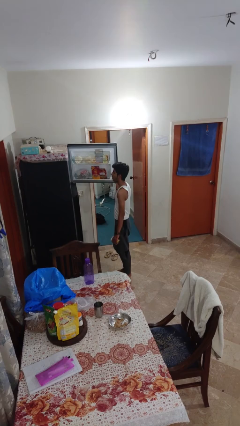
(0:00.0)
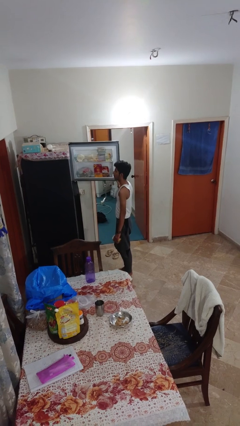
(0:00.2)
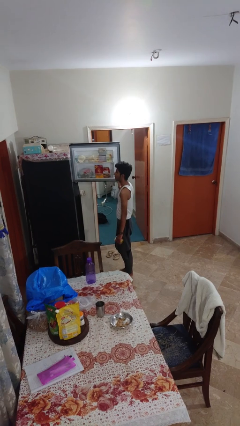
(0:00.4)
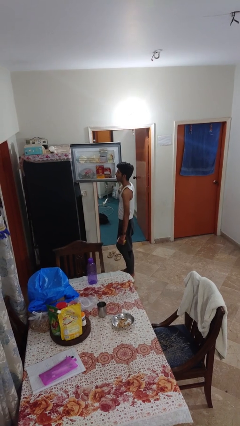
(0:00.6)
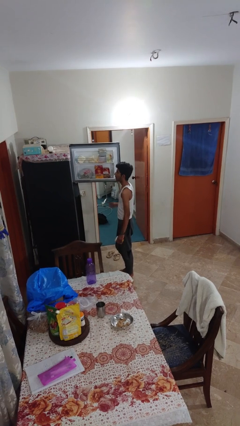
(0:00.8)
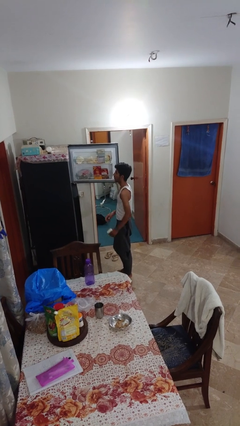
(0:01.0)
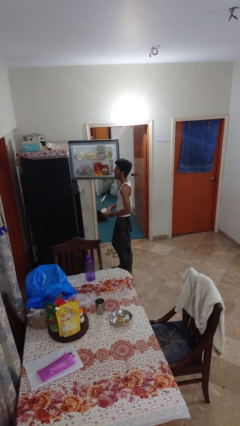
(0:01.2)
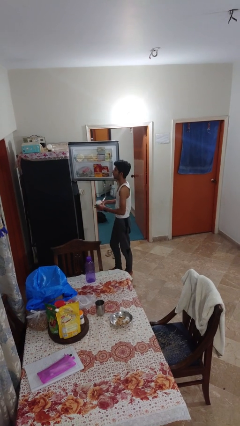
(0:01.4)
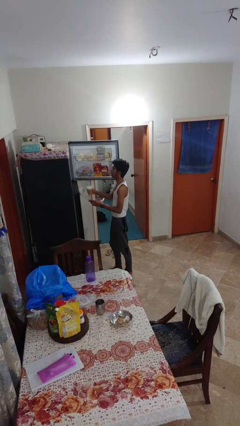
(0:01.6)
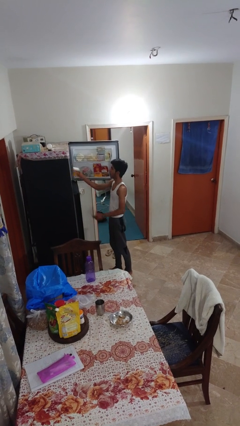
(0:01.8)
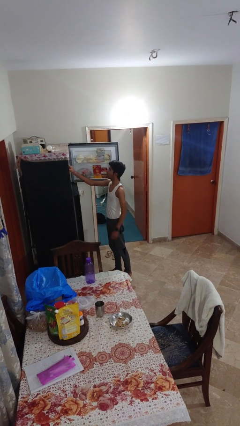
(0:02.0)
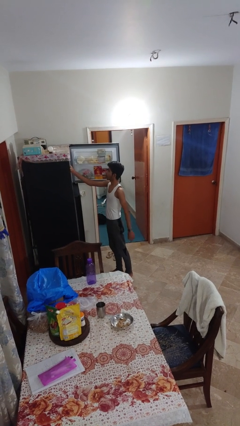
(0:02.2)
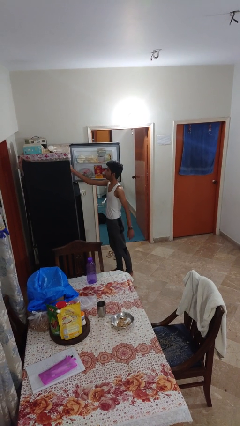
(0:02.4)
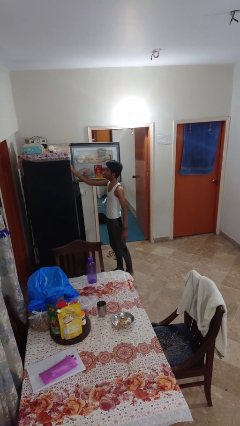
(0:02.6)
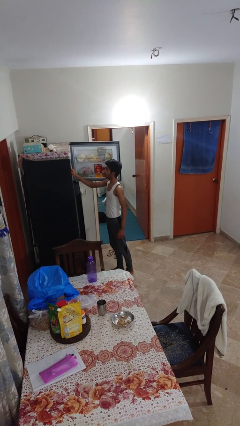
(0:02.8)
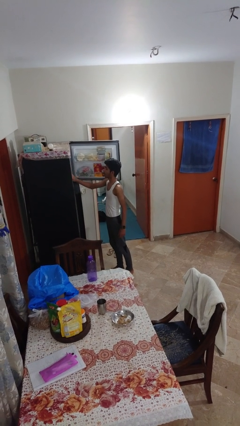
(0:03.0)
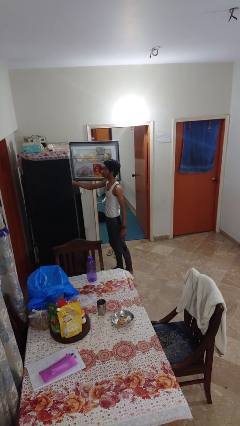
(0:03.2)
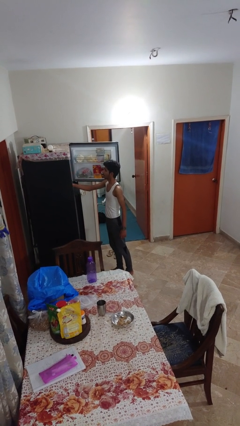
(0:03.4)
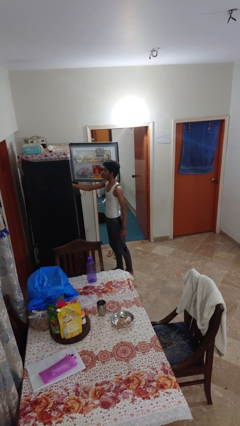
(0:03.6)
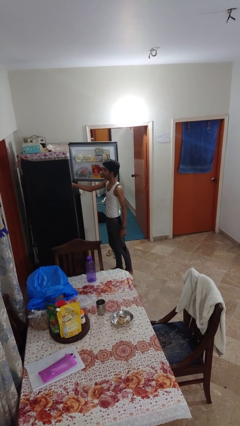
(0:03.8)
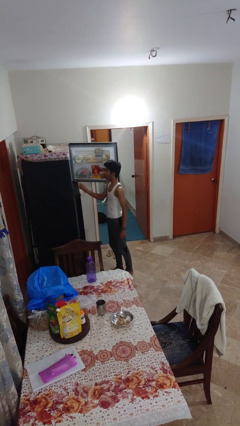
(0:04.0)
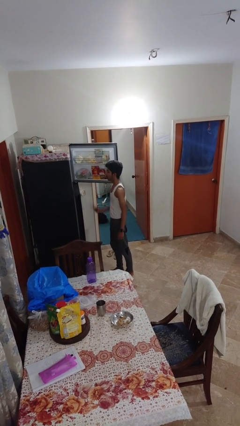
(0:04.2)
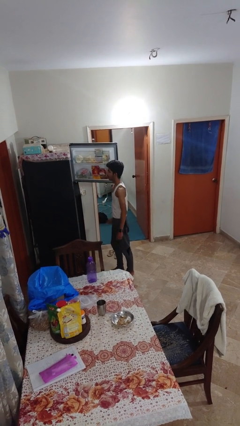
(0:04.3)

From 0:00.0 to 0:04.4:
person puts object into refrigerator

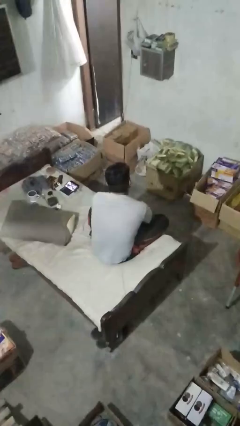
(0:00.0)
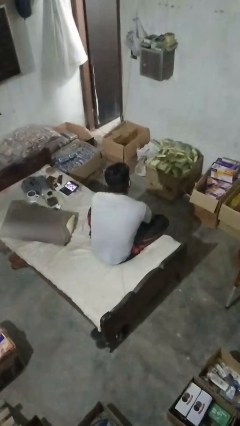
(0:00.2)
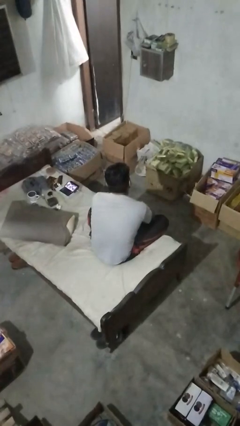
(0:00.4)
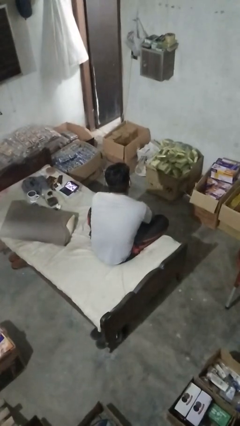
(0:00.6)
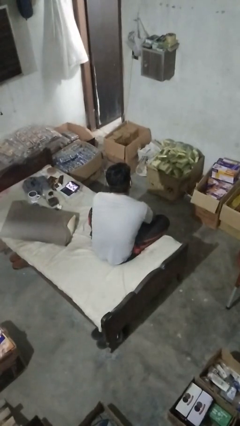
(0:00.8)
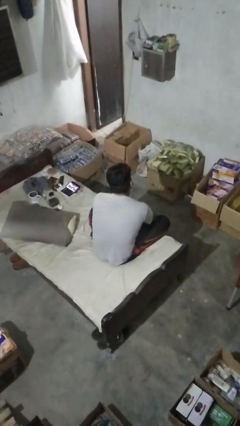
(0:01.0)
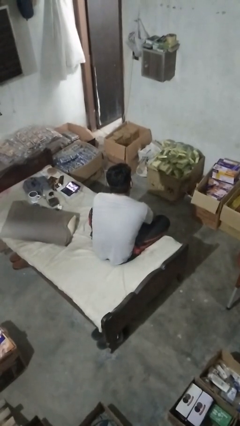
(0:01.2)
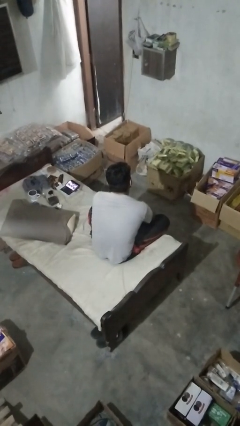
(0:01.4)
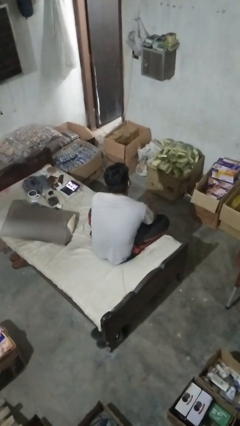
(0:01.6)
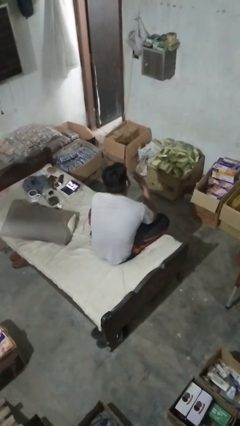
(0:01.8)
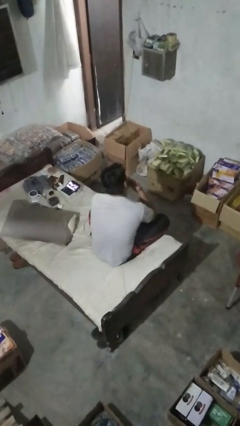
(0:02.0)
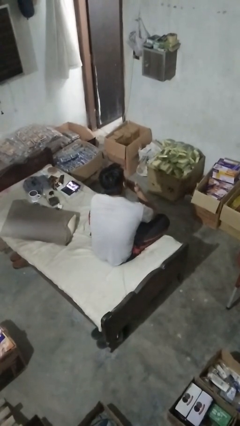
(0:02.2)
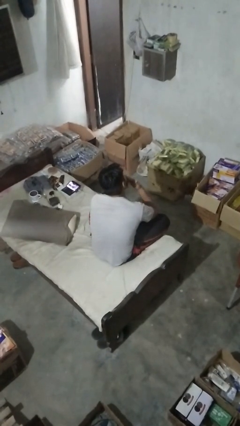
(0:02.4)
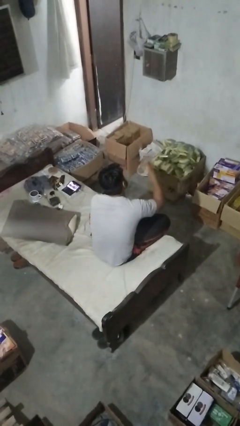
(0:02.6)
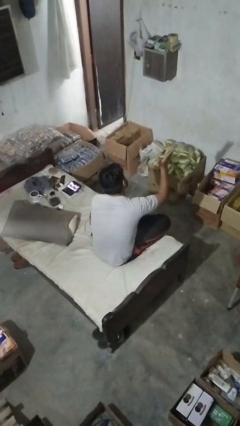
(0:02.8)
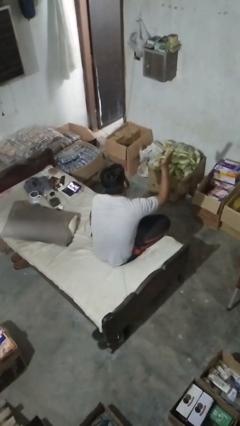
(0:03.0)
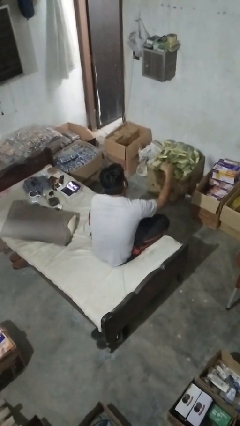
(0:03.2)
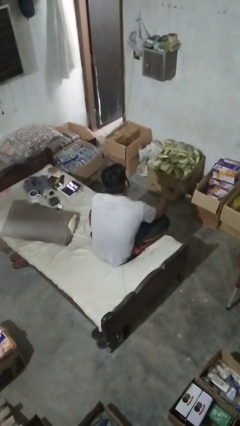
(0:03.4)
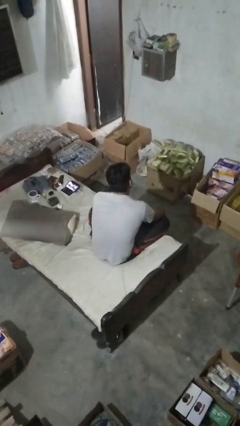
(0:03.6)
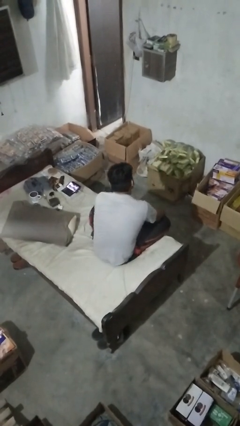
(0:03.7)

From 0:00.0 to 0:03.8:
person gestures blow kiss

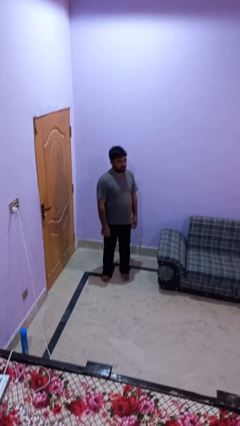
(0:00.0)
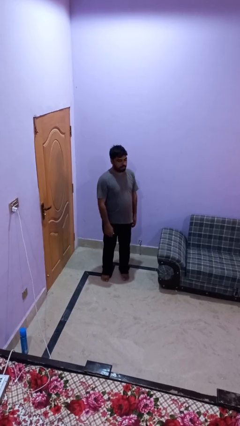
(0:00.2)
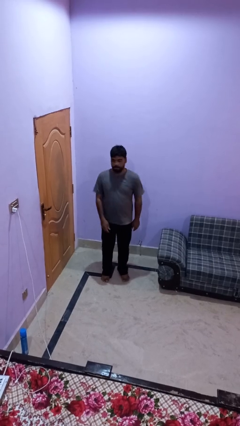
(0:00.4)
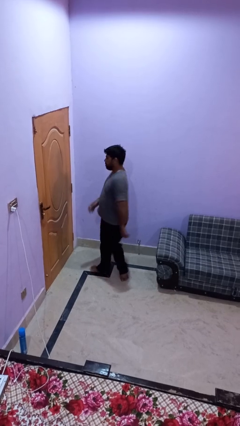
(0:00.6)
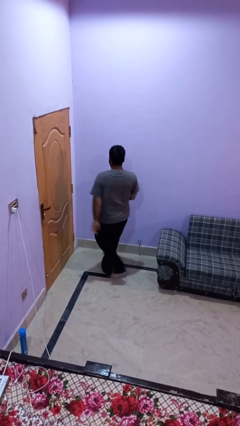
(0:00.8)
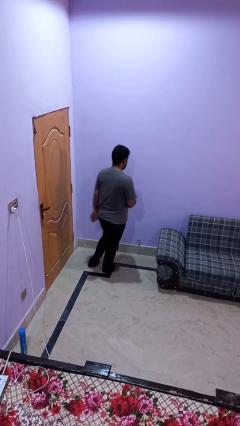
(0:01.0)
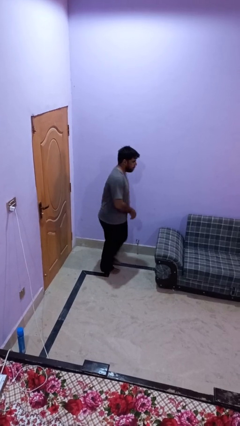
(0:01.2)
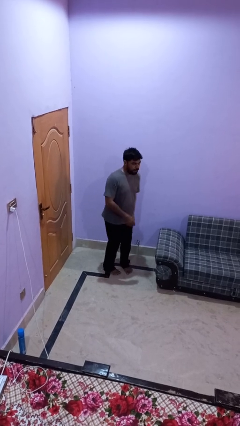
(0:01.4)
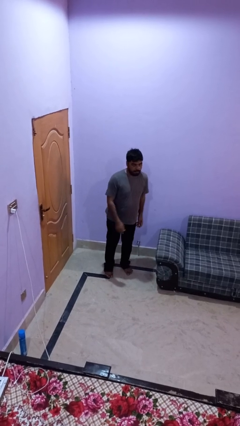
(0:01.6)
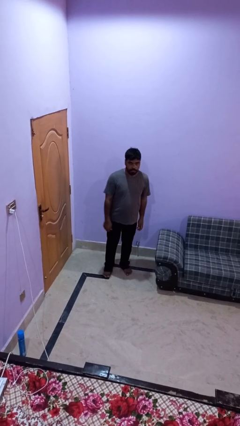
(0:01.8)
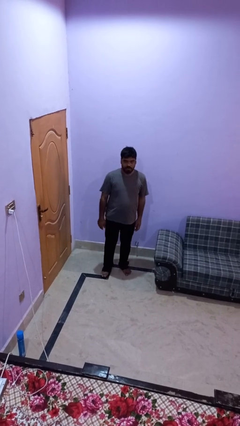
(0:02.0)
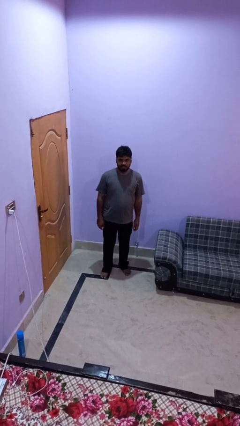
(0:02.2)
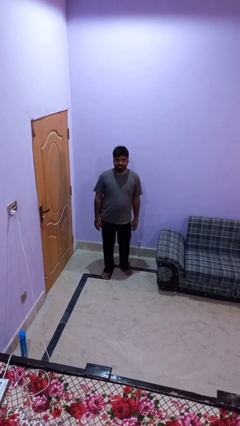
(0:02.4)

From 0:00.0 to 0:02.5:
person twirls

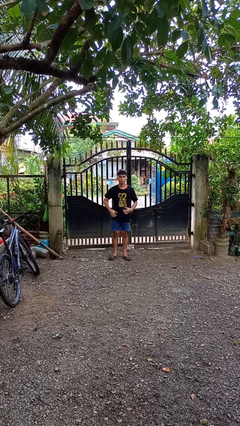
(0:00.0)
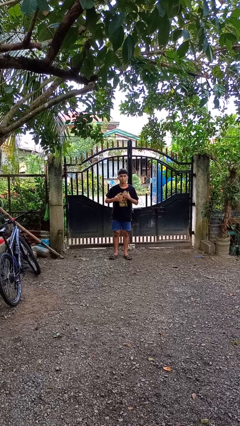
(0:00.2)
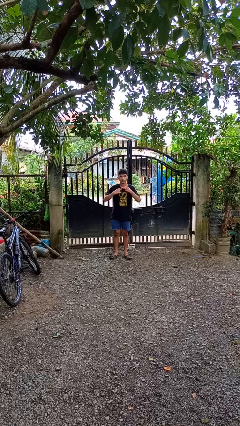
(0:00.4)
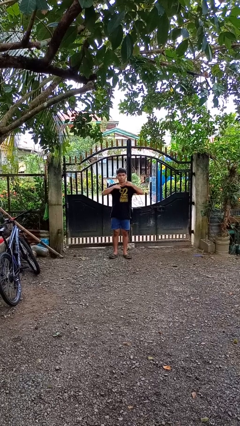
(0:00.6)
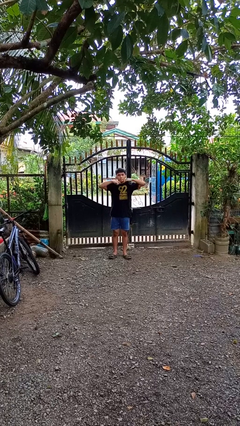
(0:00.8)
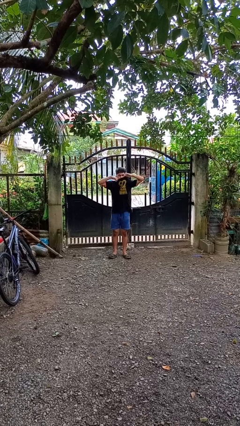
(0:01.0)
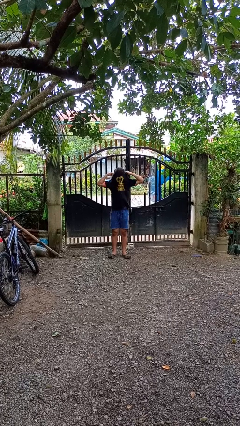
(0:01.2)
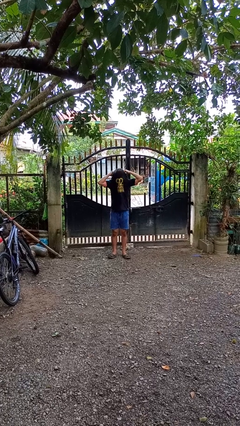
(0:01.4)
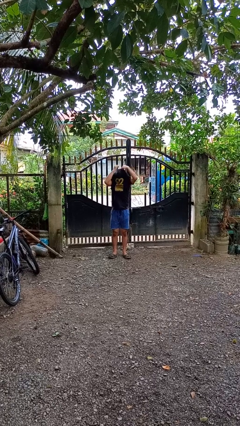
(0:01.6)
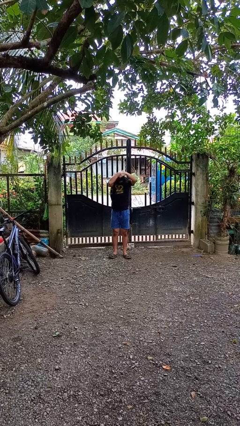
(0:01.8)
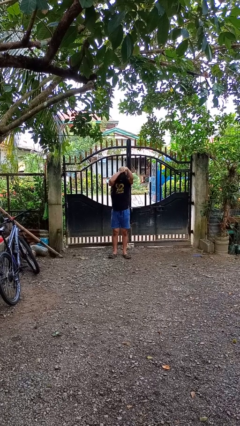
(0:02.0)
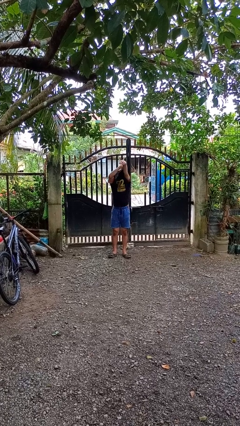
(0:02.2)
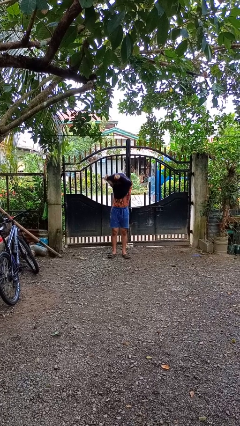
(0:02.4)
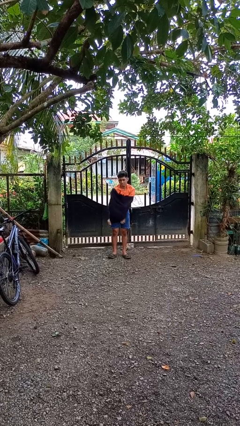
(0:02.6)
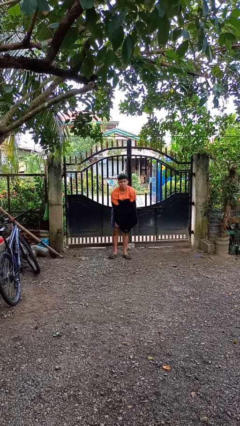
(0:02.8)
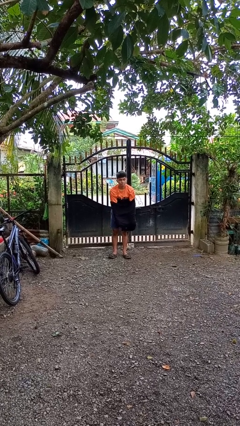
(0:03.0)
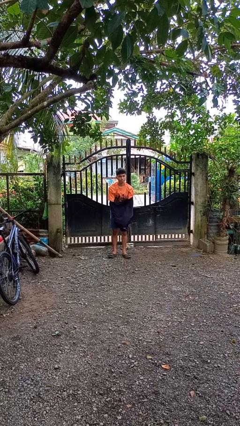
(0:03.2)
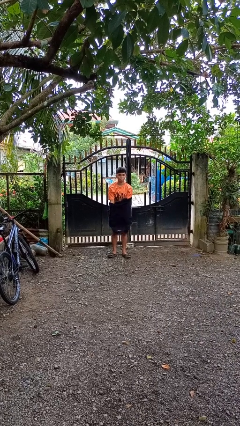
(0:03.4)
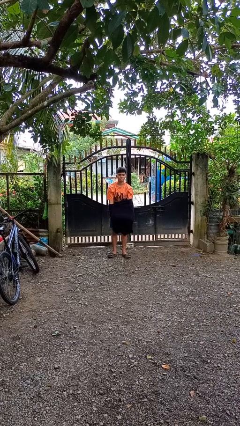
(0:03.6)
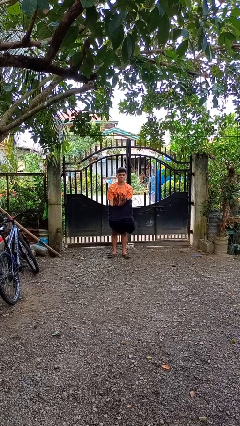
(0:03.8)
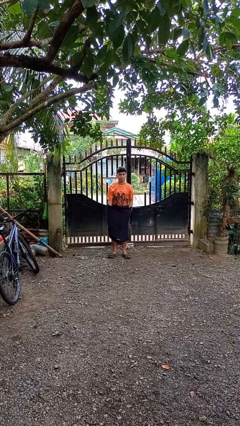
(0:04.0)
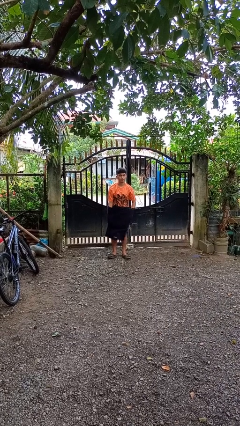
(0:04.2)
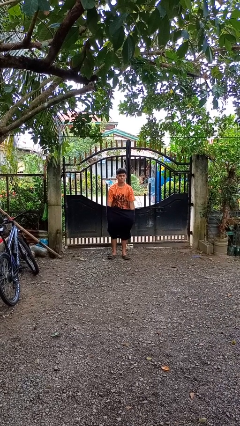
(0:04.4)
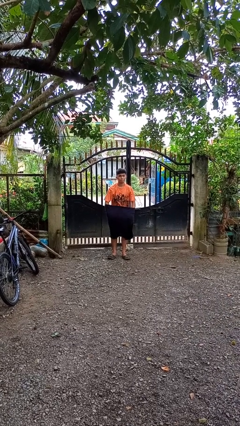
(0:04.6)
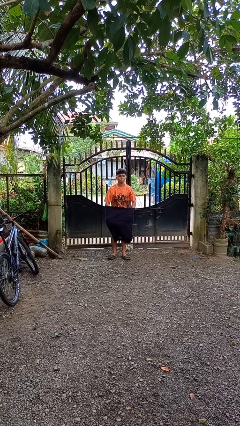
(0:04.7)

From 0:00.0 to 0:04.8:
person takes off shirt

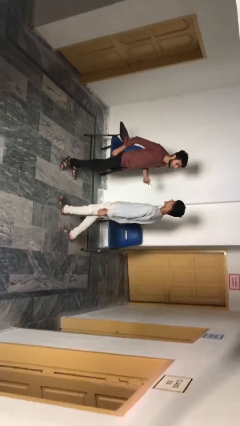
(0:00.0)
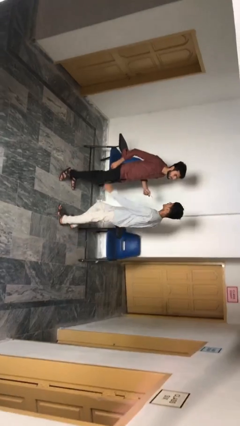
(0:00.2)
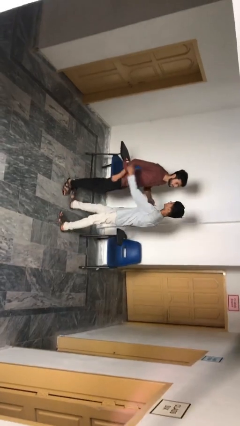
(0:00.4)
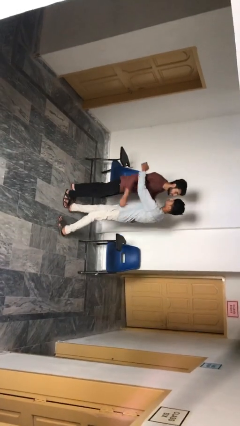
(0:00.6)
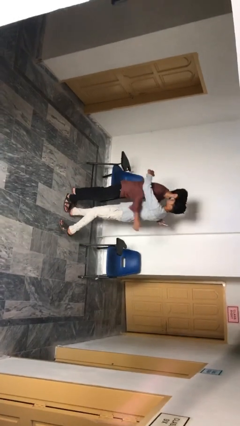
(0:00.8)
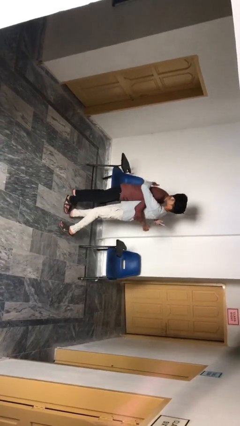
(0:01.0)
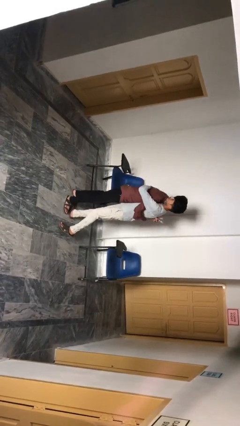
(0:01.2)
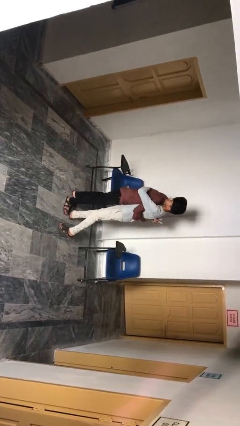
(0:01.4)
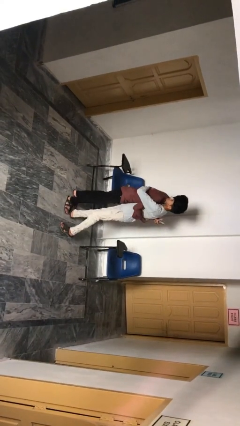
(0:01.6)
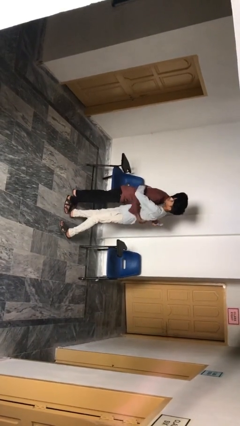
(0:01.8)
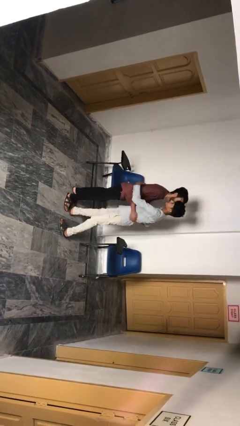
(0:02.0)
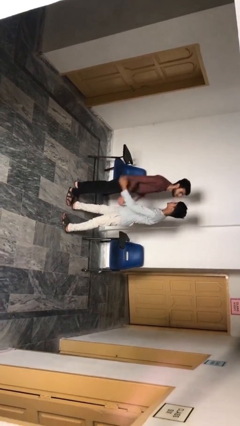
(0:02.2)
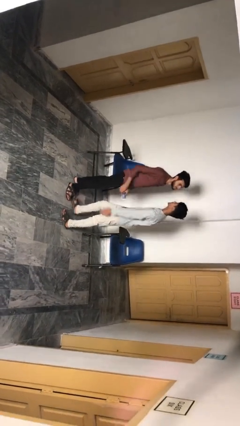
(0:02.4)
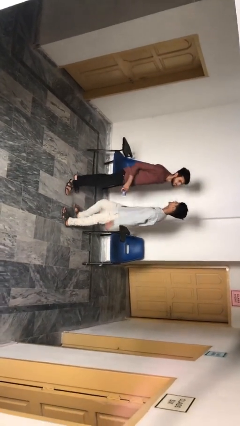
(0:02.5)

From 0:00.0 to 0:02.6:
person embraces person
